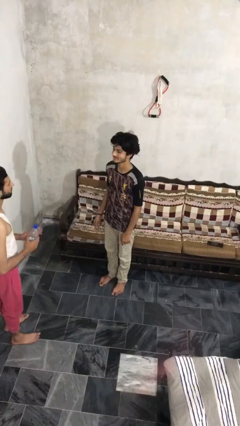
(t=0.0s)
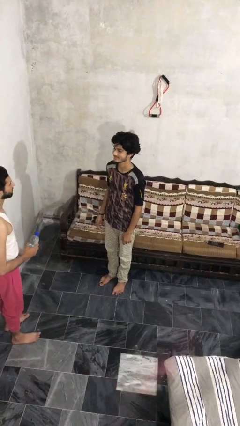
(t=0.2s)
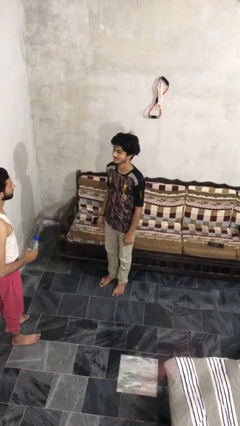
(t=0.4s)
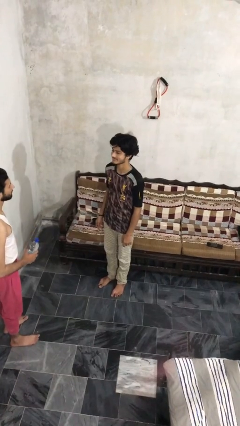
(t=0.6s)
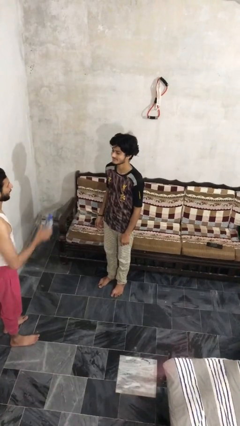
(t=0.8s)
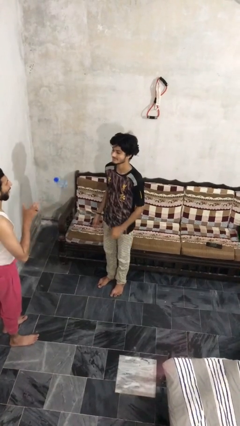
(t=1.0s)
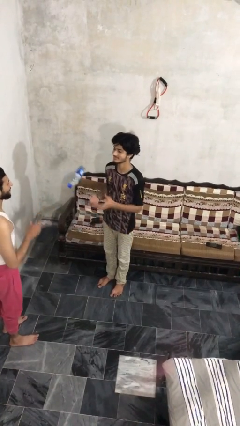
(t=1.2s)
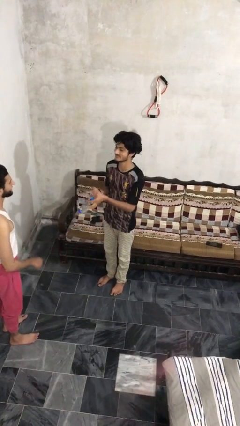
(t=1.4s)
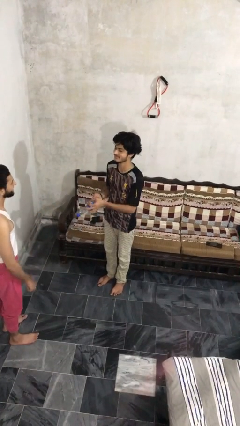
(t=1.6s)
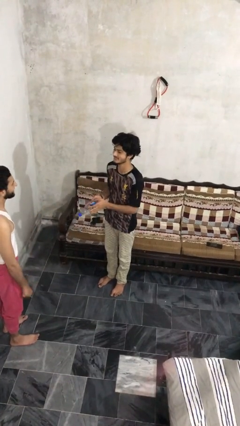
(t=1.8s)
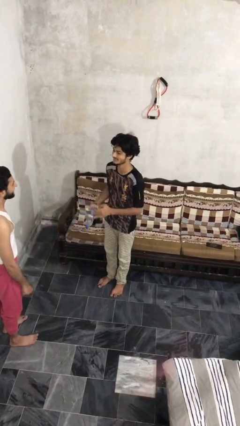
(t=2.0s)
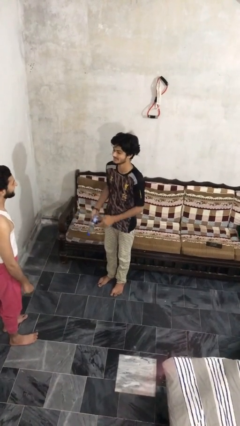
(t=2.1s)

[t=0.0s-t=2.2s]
person catches object from person

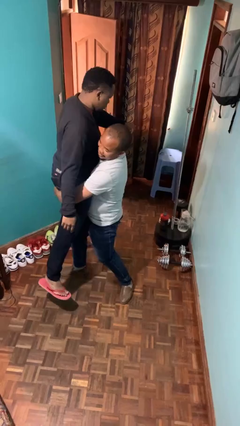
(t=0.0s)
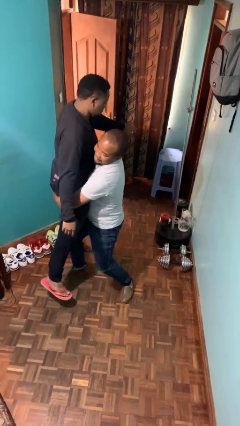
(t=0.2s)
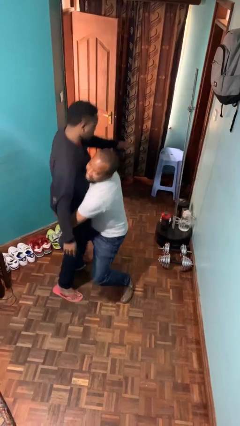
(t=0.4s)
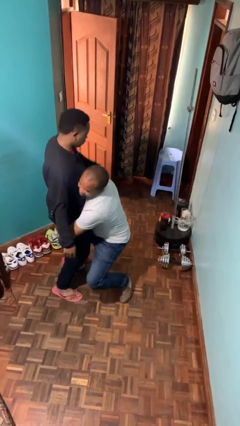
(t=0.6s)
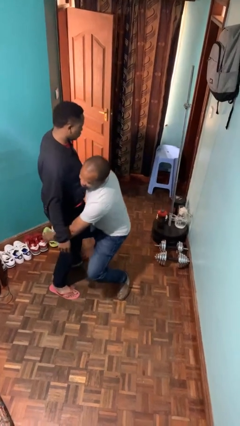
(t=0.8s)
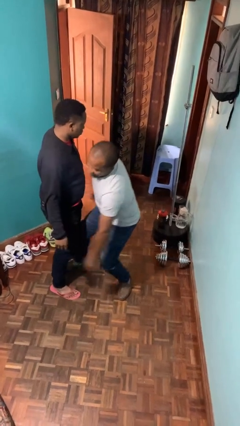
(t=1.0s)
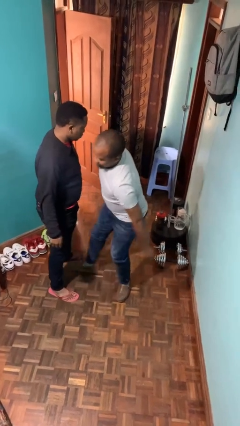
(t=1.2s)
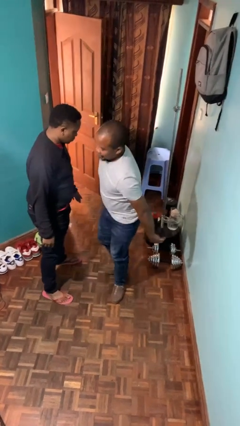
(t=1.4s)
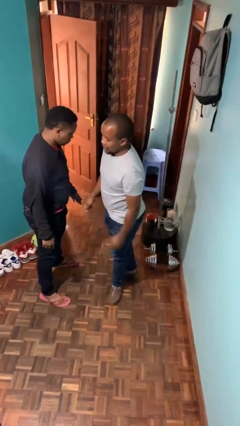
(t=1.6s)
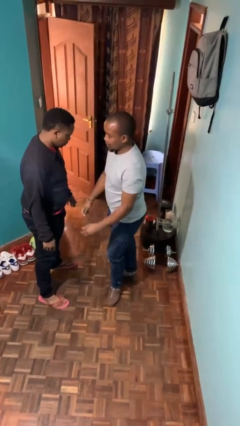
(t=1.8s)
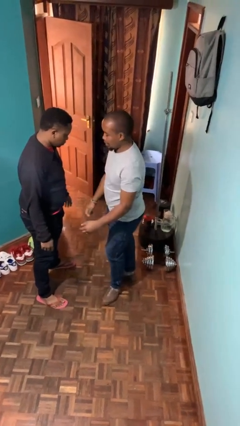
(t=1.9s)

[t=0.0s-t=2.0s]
person puts down person

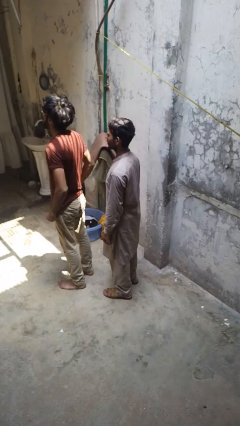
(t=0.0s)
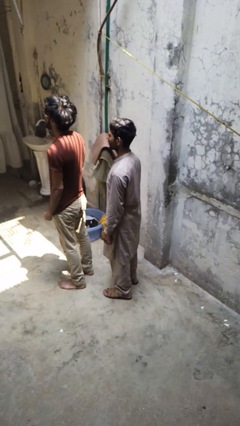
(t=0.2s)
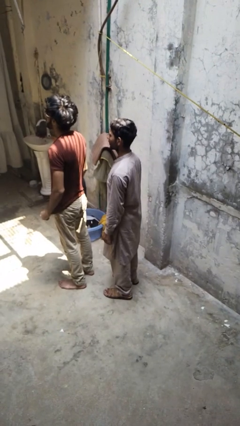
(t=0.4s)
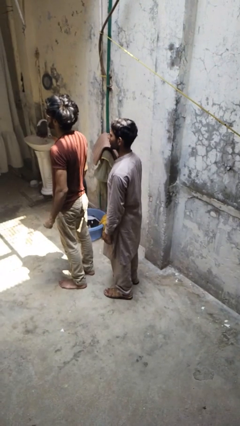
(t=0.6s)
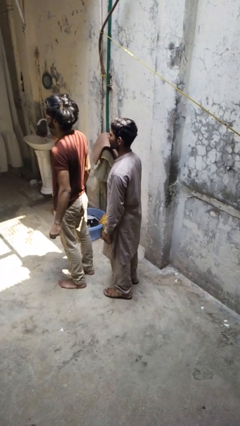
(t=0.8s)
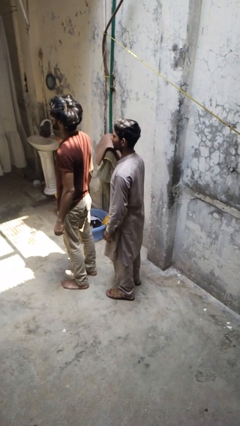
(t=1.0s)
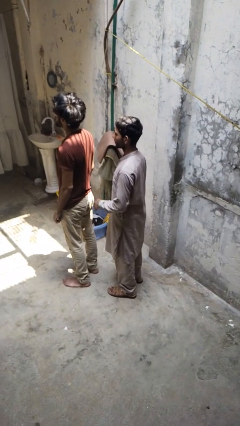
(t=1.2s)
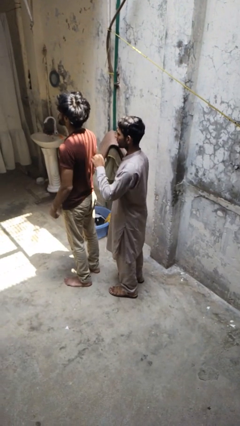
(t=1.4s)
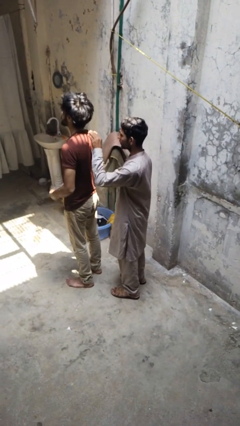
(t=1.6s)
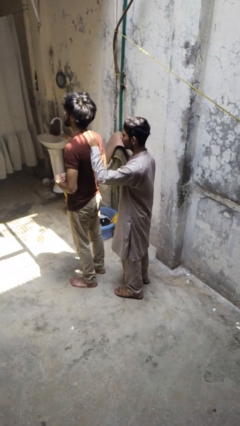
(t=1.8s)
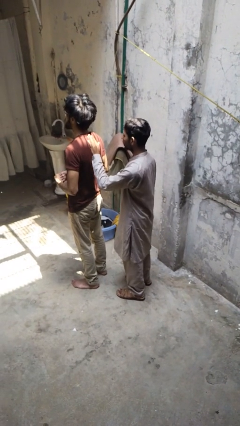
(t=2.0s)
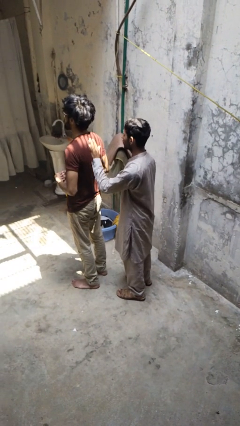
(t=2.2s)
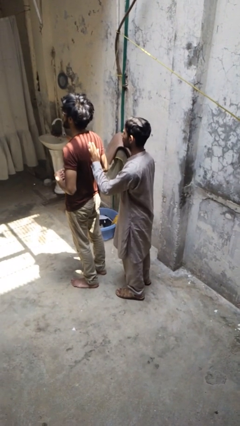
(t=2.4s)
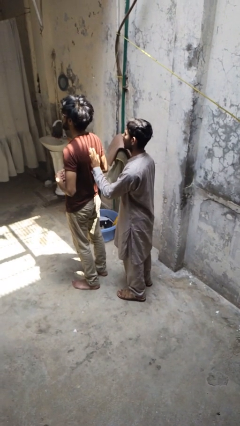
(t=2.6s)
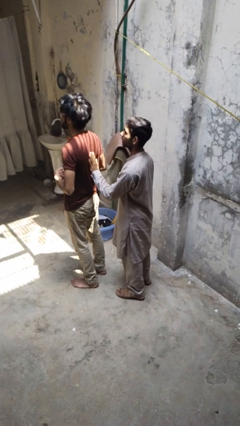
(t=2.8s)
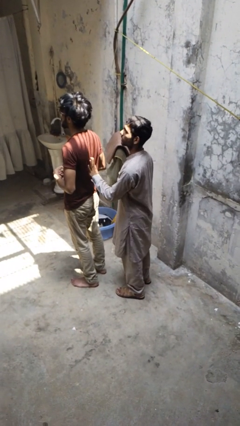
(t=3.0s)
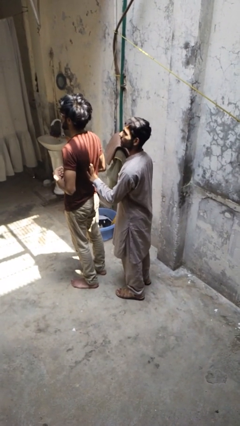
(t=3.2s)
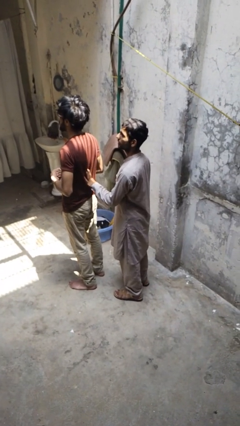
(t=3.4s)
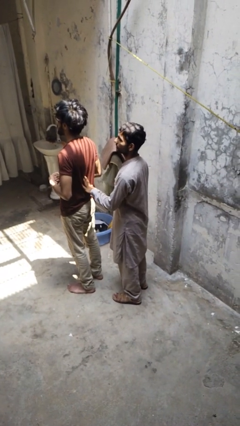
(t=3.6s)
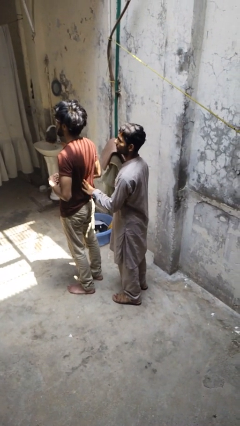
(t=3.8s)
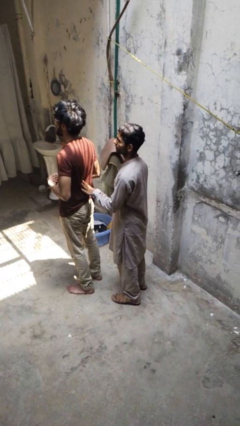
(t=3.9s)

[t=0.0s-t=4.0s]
person touches back of person

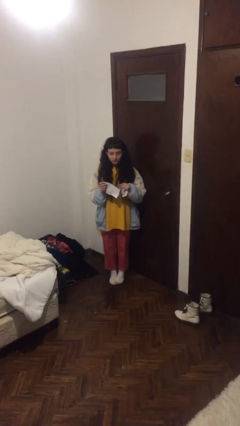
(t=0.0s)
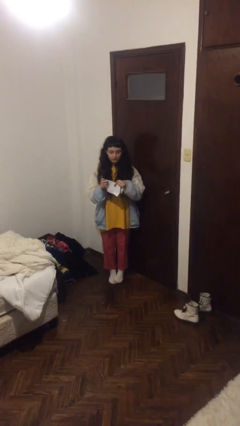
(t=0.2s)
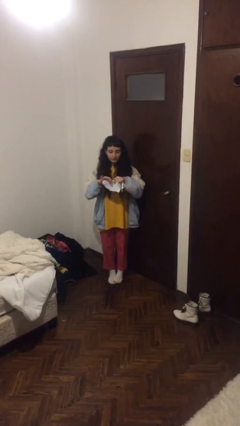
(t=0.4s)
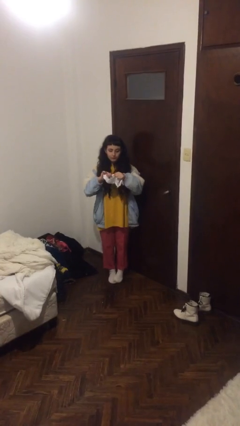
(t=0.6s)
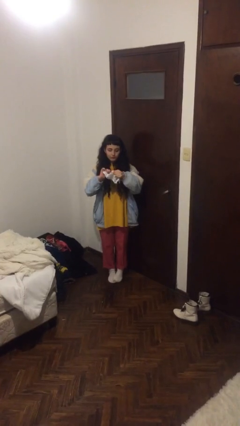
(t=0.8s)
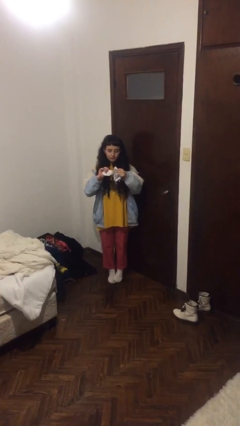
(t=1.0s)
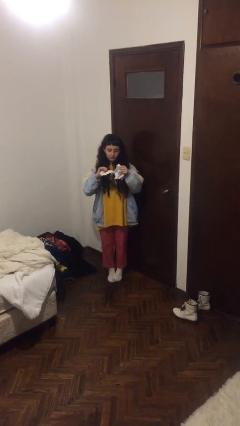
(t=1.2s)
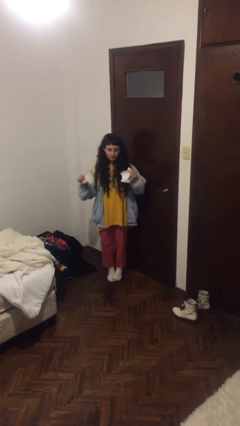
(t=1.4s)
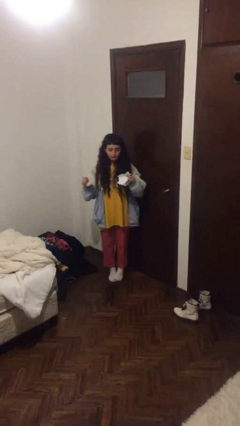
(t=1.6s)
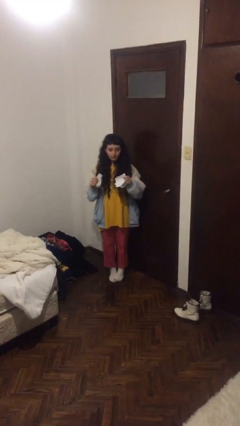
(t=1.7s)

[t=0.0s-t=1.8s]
person tears paper

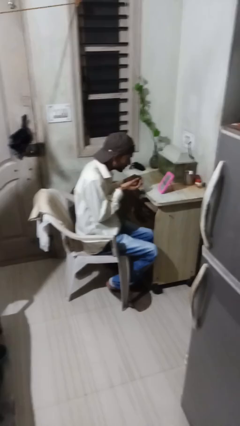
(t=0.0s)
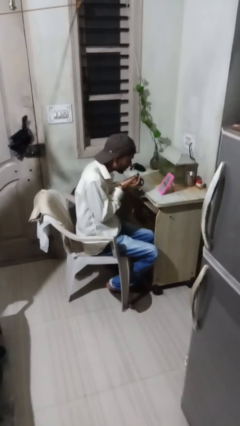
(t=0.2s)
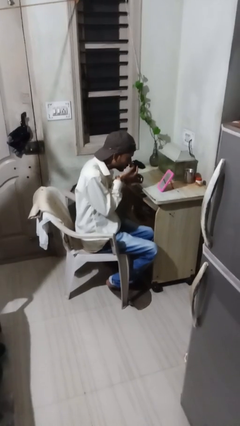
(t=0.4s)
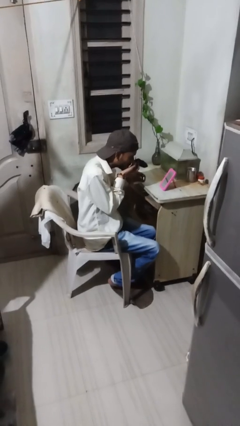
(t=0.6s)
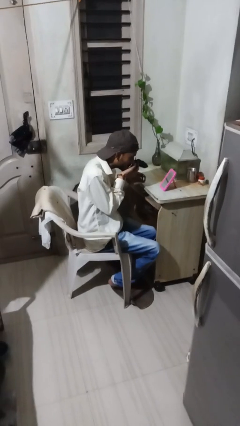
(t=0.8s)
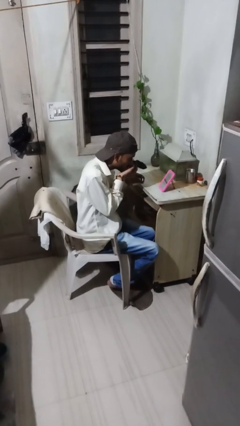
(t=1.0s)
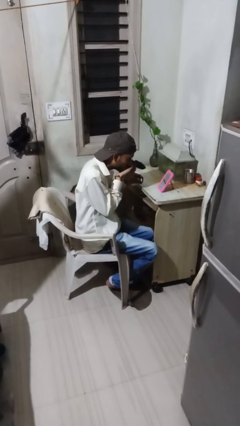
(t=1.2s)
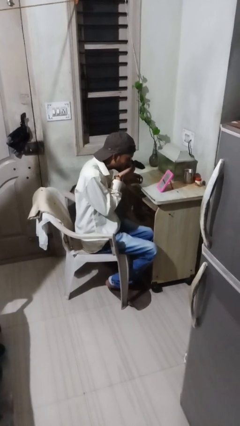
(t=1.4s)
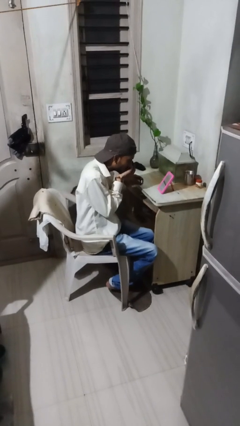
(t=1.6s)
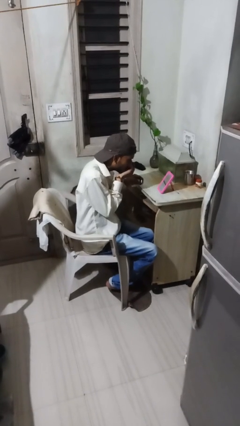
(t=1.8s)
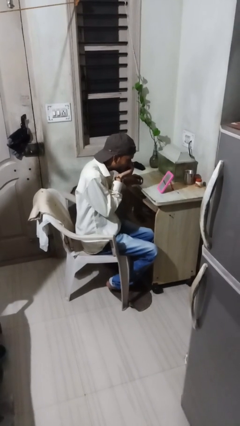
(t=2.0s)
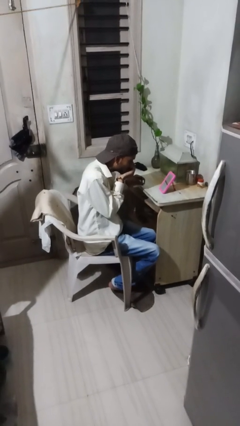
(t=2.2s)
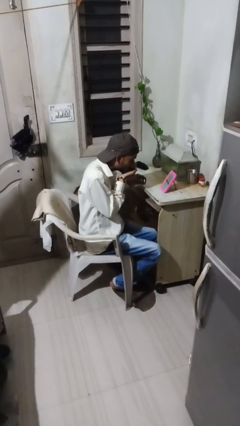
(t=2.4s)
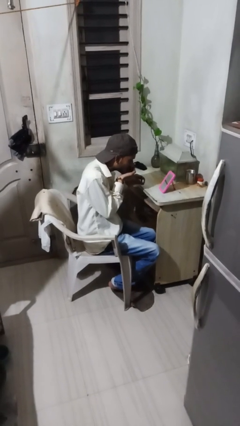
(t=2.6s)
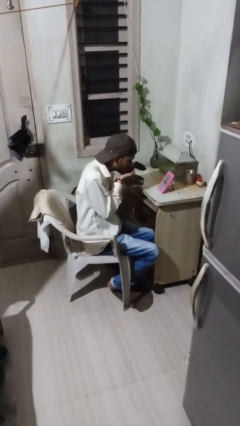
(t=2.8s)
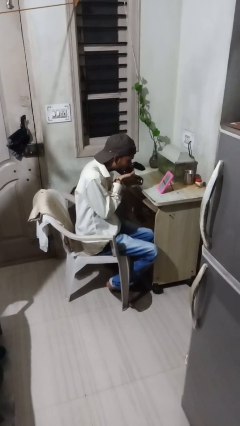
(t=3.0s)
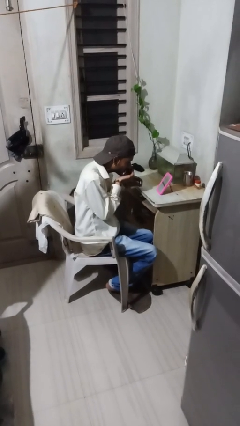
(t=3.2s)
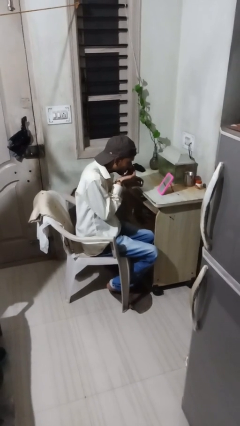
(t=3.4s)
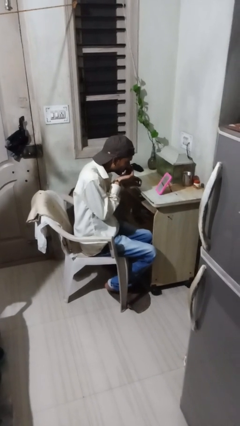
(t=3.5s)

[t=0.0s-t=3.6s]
person applies eye makeup

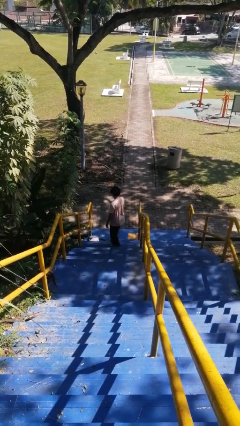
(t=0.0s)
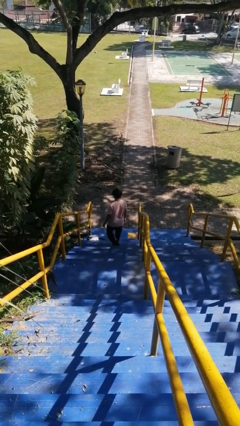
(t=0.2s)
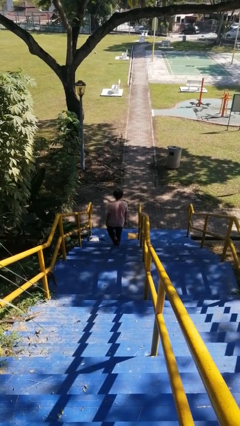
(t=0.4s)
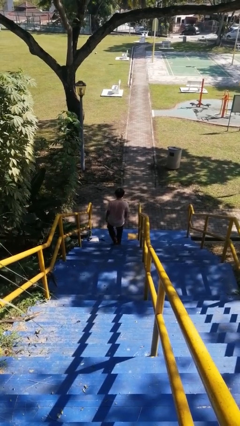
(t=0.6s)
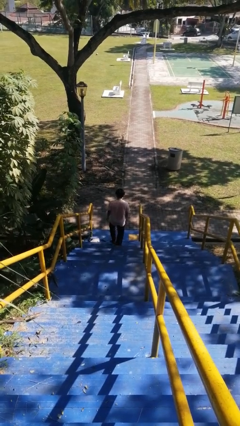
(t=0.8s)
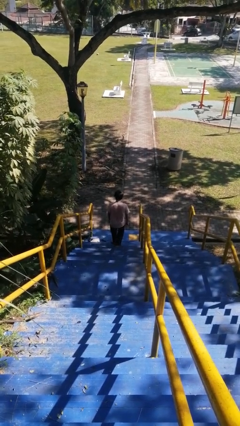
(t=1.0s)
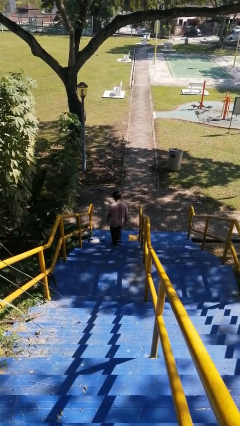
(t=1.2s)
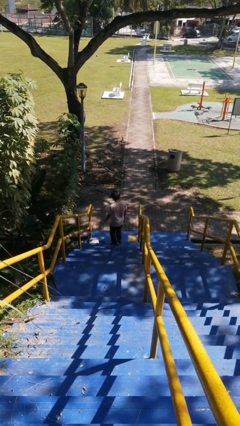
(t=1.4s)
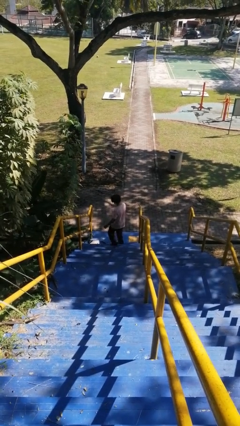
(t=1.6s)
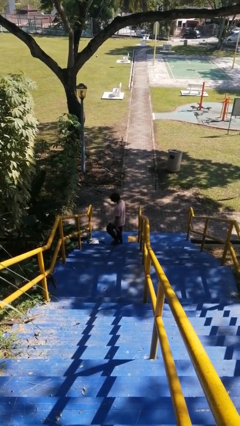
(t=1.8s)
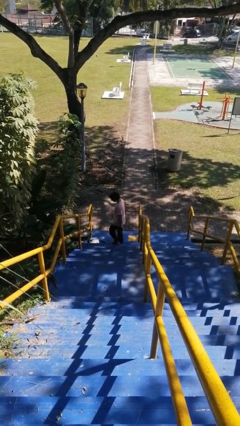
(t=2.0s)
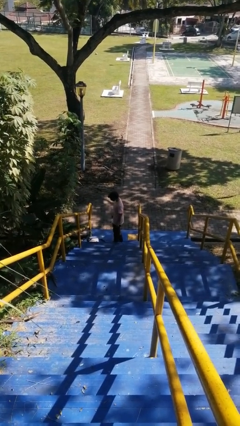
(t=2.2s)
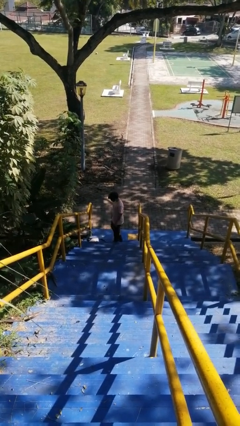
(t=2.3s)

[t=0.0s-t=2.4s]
person climbs down stairs

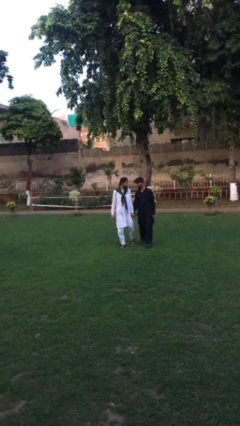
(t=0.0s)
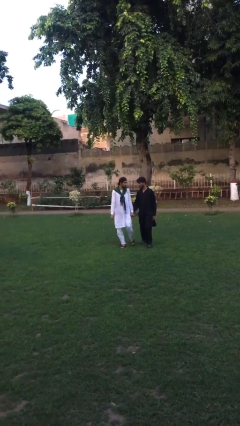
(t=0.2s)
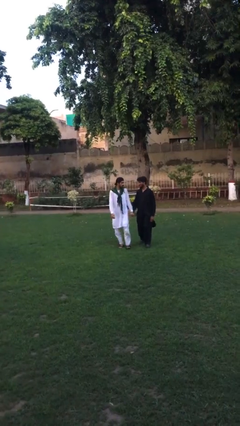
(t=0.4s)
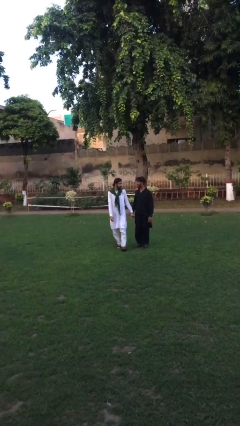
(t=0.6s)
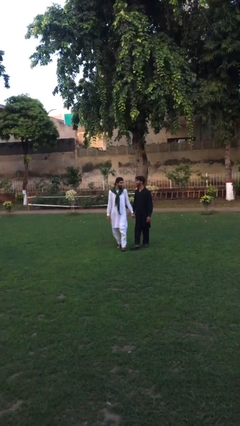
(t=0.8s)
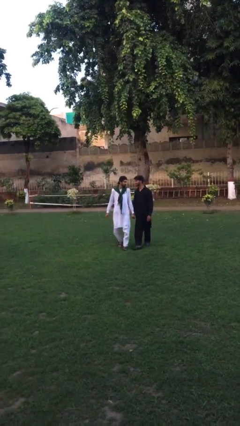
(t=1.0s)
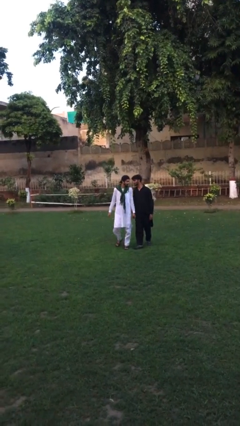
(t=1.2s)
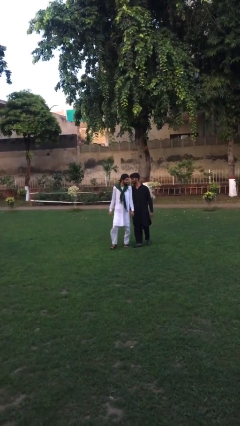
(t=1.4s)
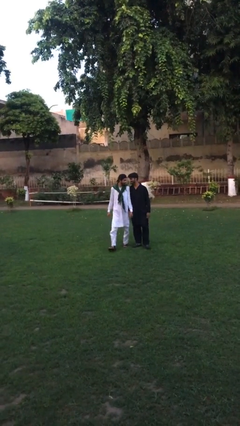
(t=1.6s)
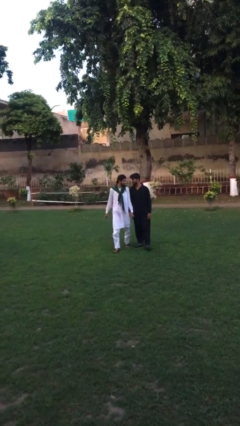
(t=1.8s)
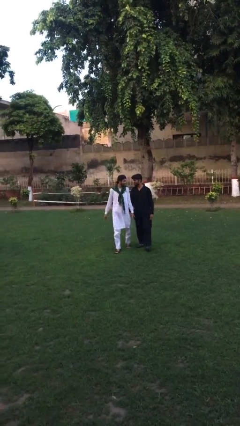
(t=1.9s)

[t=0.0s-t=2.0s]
person holds hand
